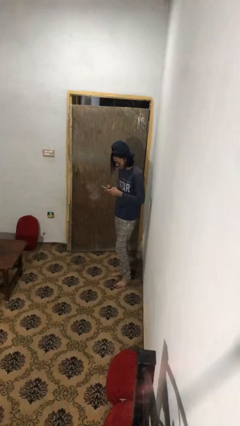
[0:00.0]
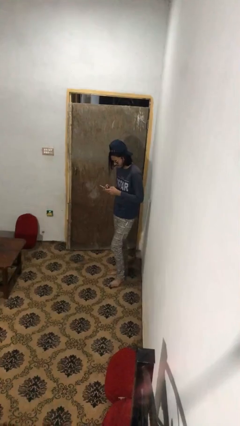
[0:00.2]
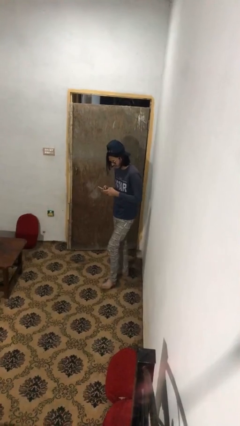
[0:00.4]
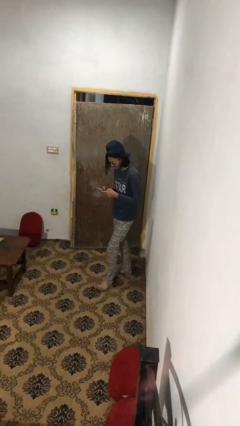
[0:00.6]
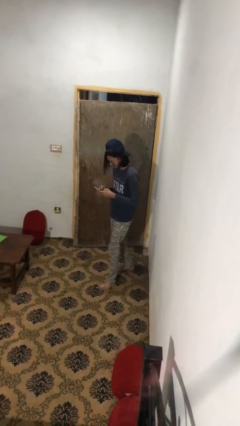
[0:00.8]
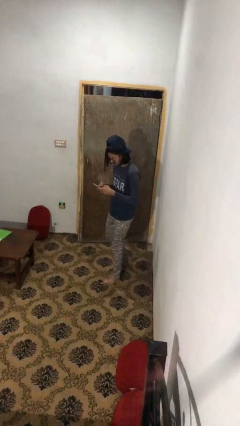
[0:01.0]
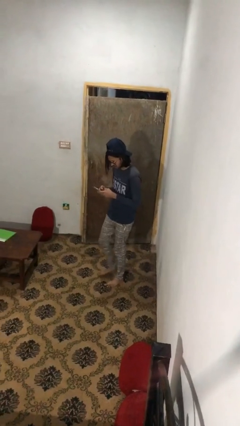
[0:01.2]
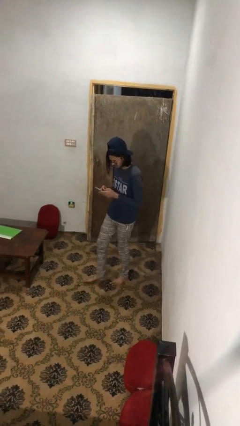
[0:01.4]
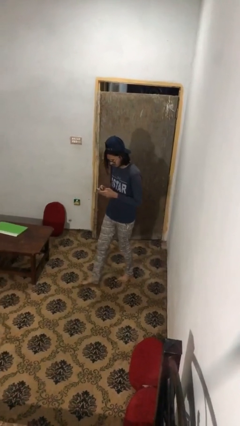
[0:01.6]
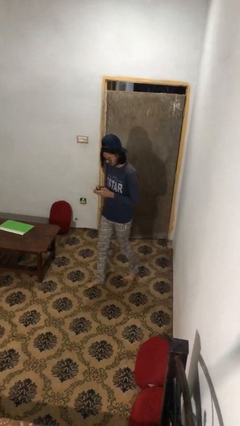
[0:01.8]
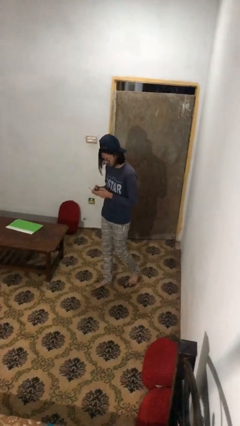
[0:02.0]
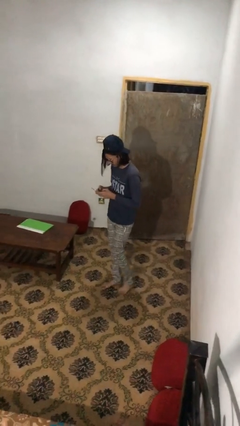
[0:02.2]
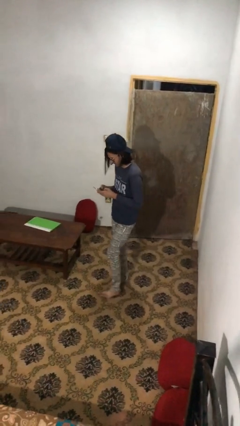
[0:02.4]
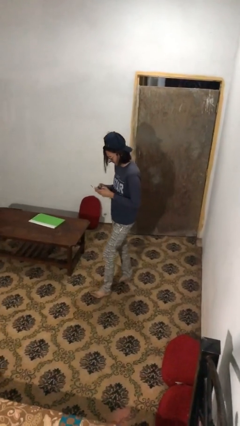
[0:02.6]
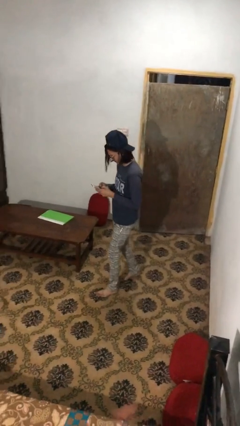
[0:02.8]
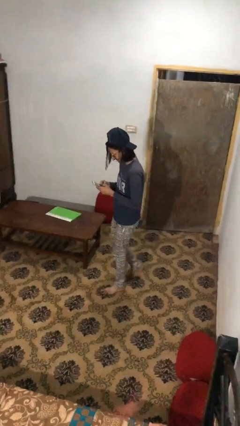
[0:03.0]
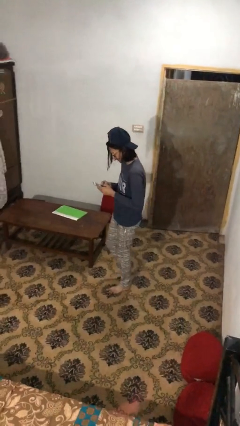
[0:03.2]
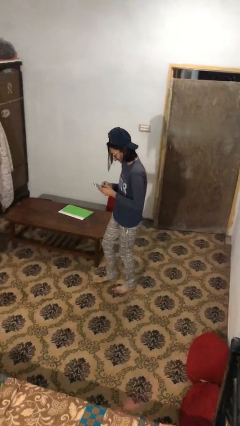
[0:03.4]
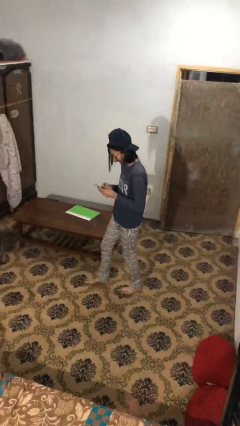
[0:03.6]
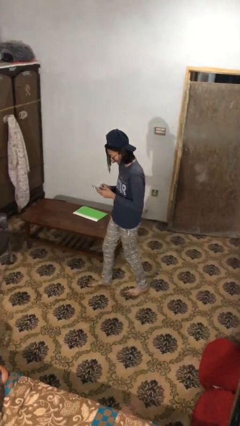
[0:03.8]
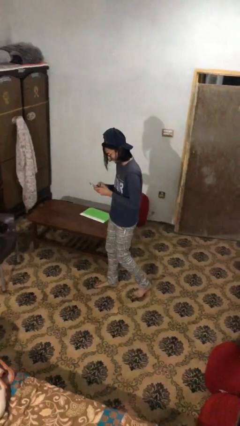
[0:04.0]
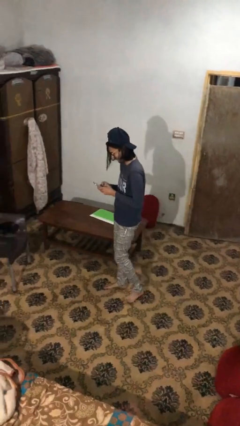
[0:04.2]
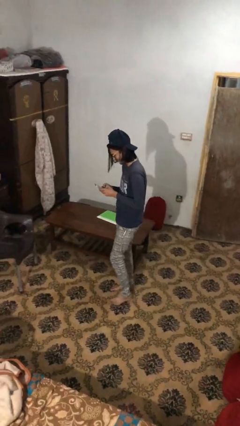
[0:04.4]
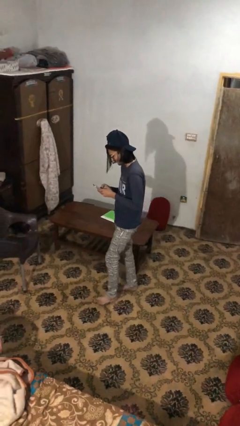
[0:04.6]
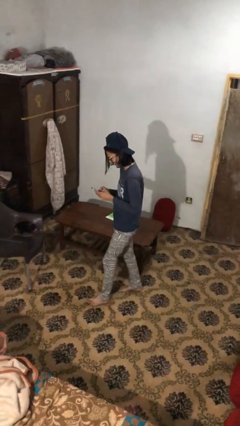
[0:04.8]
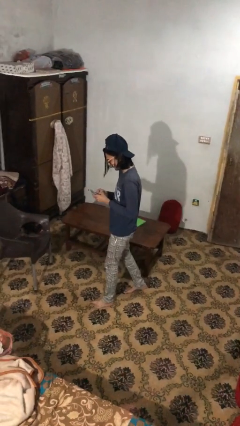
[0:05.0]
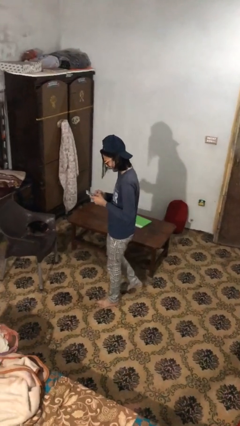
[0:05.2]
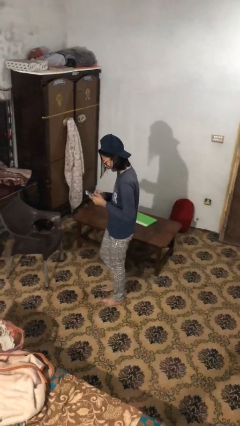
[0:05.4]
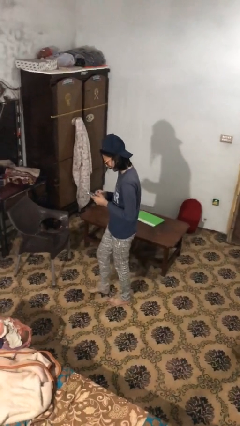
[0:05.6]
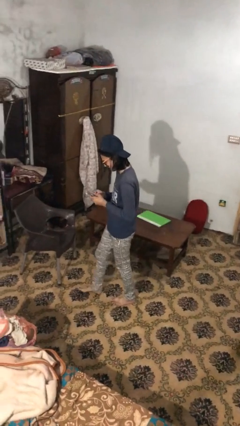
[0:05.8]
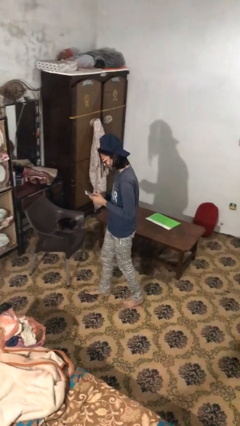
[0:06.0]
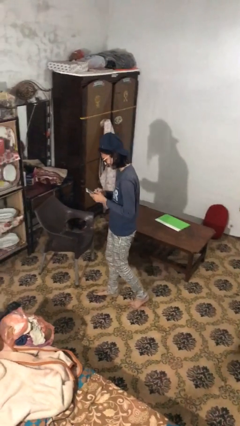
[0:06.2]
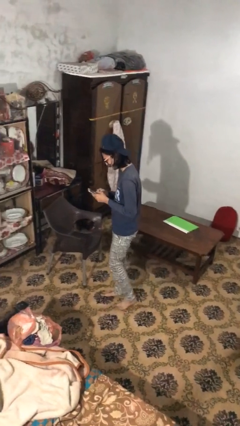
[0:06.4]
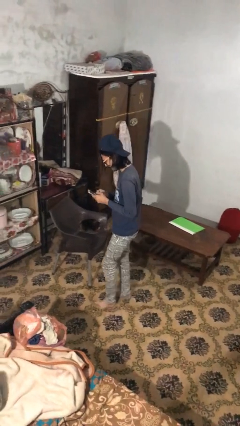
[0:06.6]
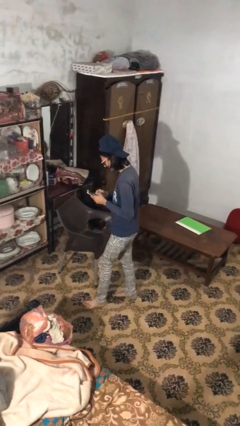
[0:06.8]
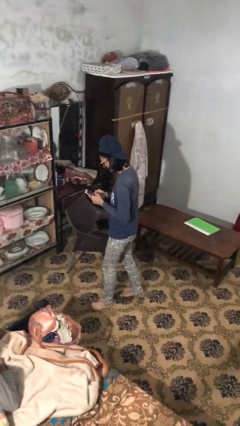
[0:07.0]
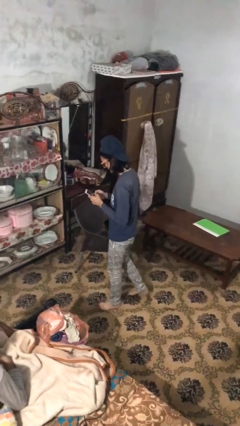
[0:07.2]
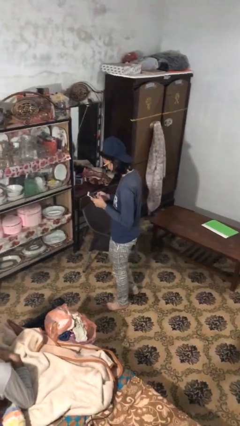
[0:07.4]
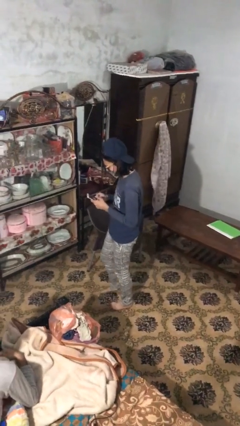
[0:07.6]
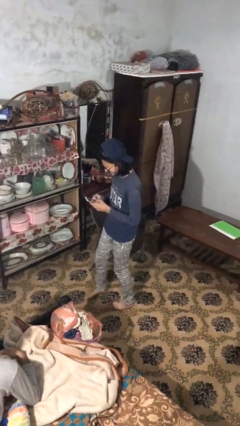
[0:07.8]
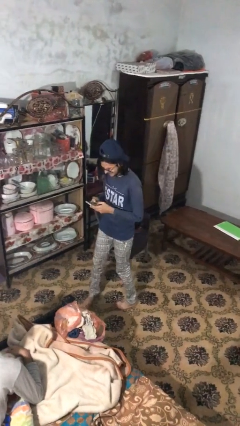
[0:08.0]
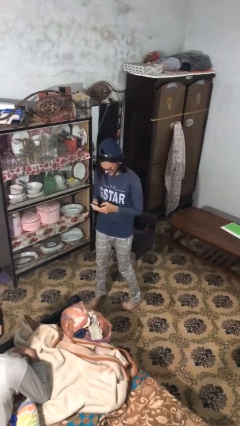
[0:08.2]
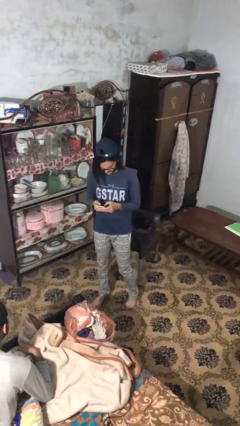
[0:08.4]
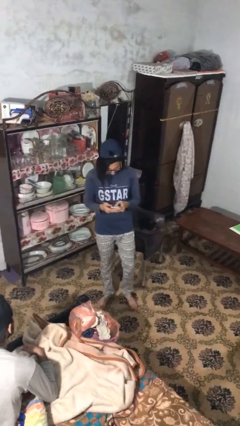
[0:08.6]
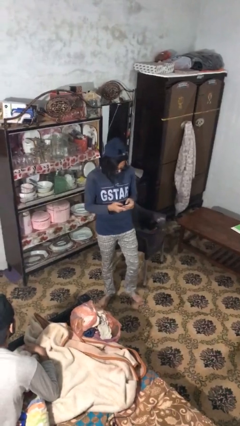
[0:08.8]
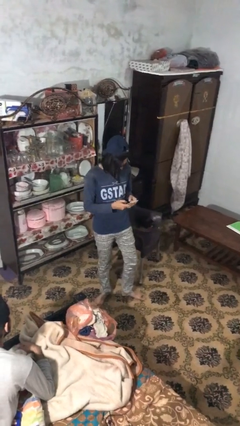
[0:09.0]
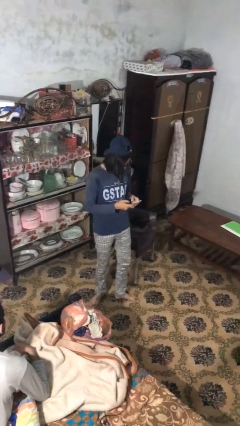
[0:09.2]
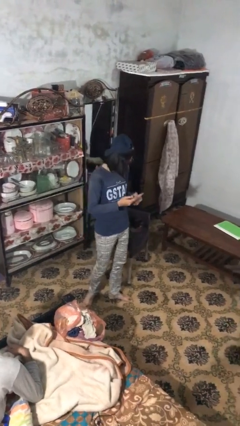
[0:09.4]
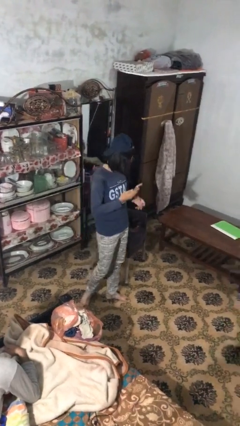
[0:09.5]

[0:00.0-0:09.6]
person texts on phone

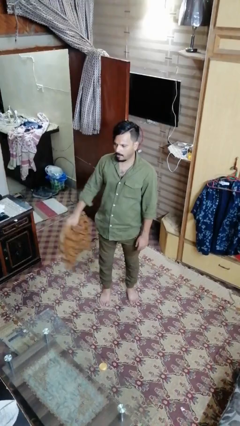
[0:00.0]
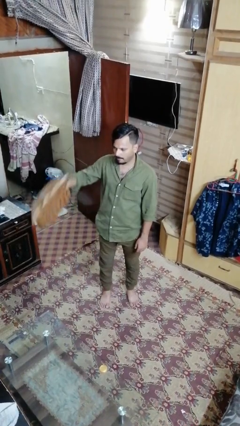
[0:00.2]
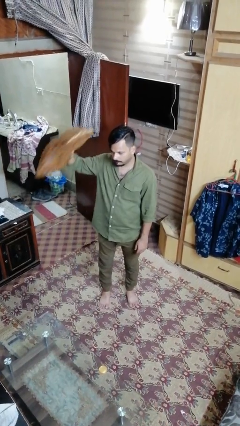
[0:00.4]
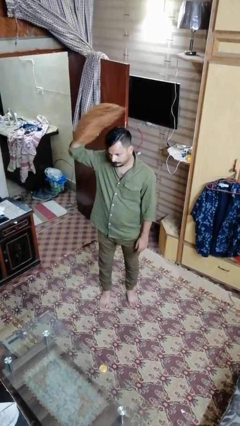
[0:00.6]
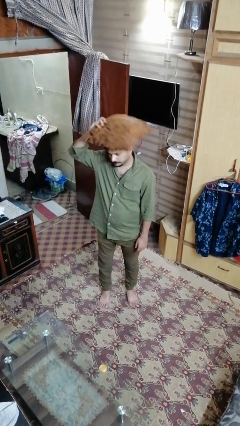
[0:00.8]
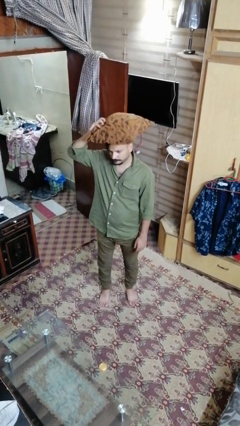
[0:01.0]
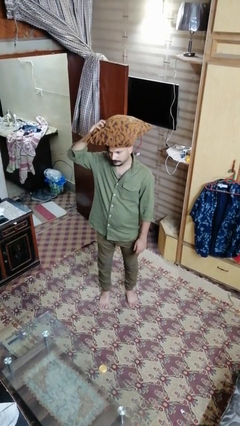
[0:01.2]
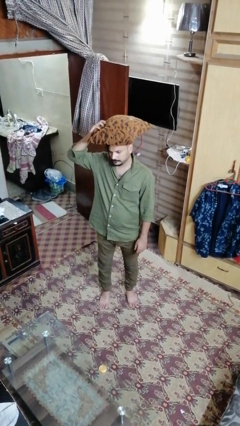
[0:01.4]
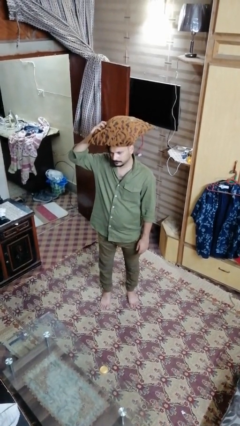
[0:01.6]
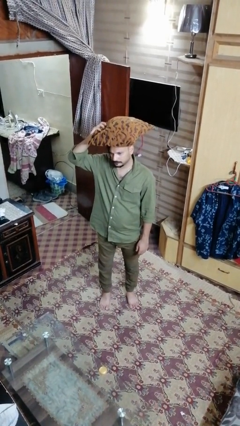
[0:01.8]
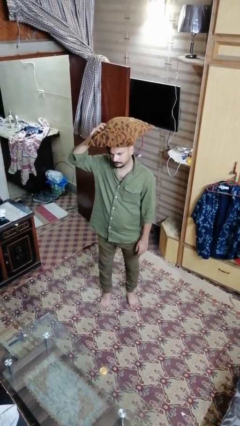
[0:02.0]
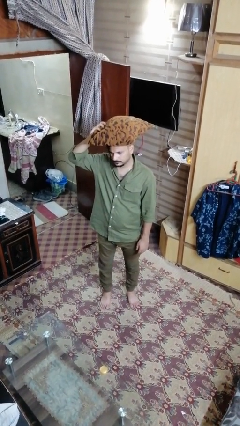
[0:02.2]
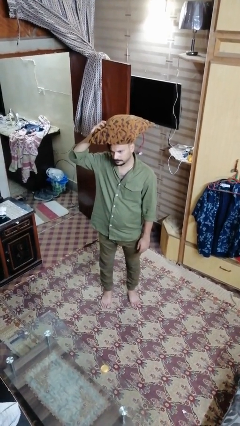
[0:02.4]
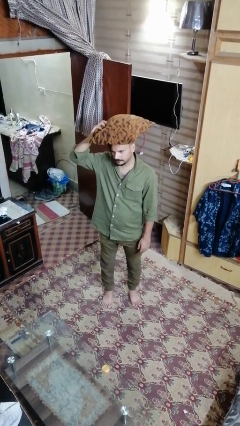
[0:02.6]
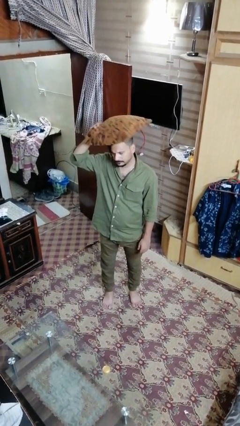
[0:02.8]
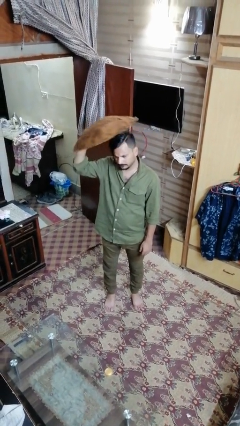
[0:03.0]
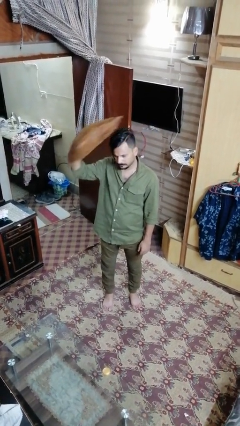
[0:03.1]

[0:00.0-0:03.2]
person holds object above head

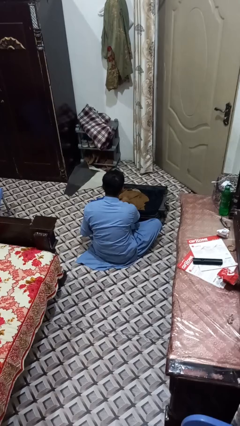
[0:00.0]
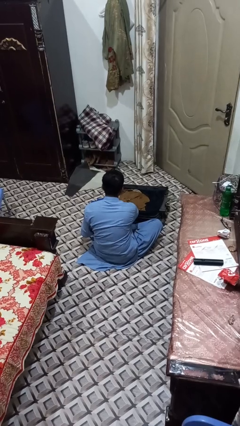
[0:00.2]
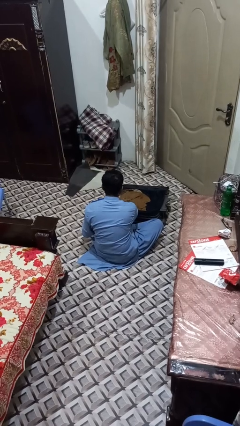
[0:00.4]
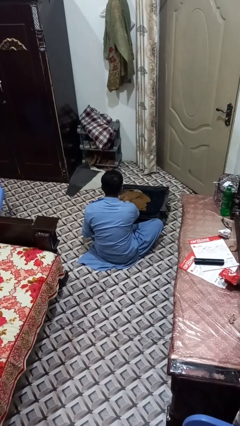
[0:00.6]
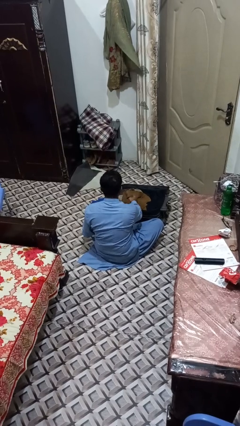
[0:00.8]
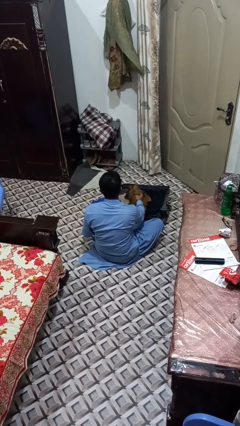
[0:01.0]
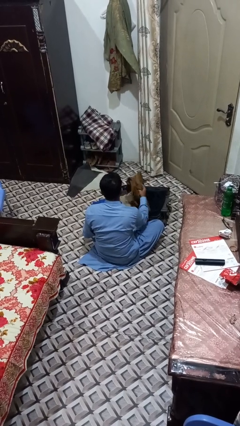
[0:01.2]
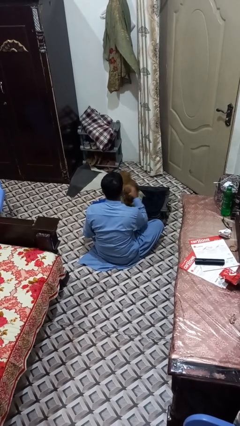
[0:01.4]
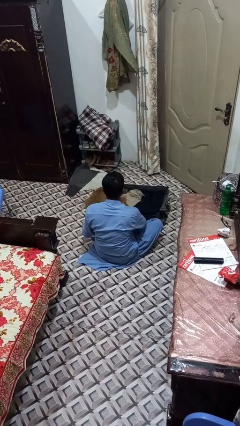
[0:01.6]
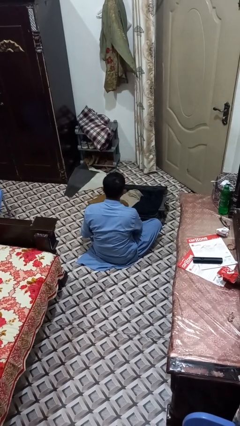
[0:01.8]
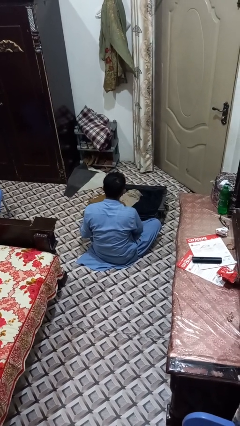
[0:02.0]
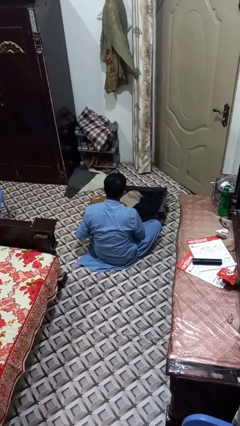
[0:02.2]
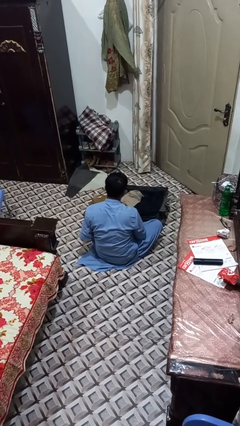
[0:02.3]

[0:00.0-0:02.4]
person unloads clothes from suitcase

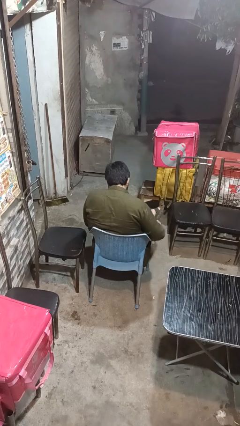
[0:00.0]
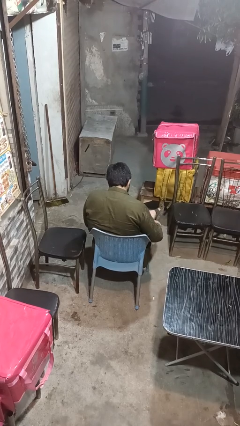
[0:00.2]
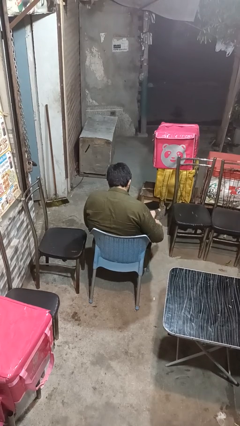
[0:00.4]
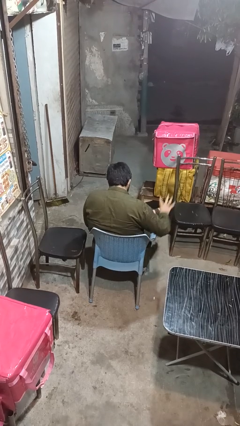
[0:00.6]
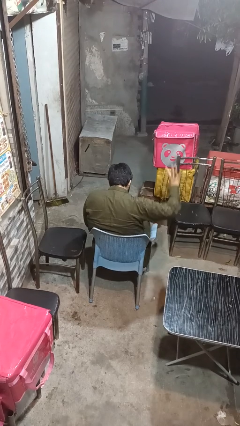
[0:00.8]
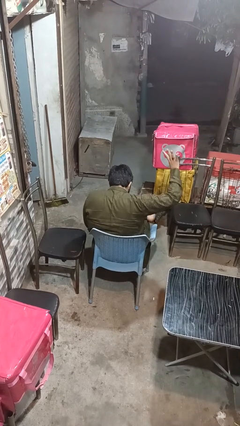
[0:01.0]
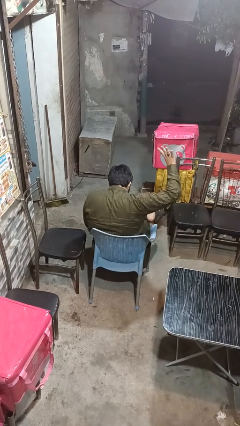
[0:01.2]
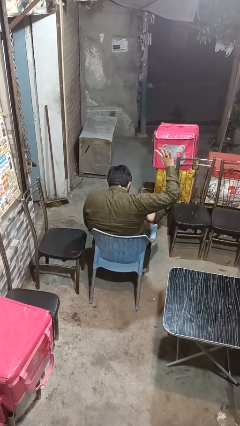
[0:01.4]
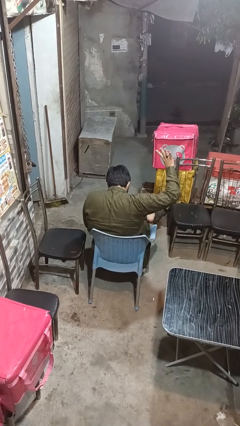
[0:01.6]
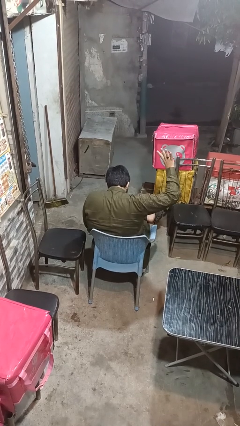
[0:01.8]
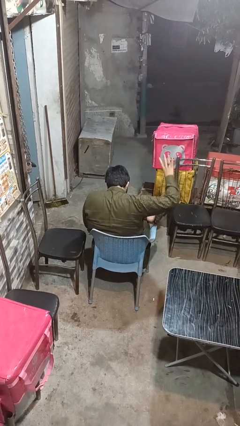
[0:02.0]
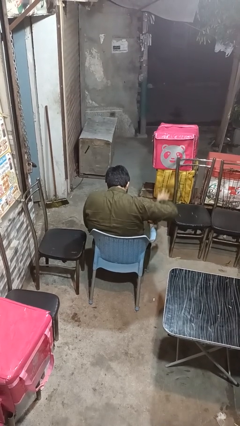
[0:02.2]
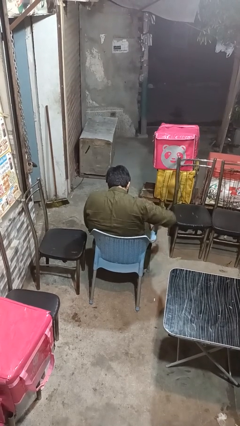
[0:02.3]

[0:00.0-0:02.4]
person gestures number four

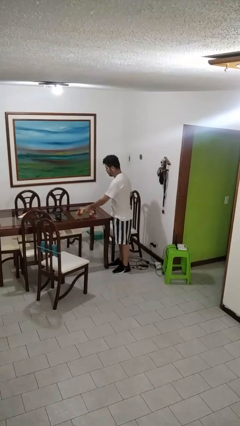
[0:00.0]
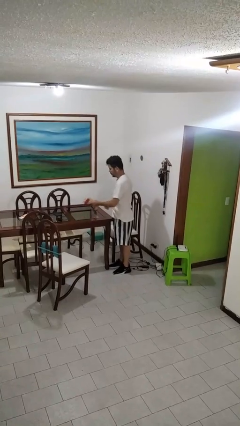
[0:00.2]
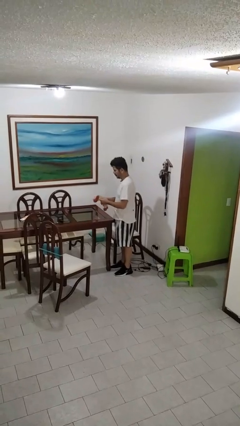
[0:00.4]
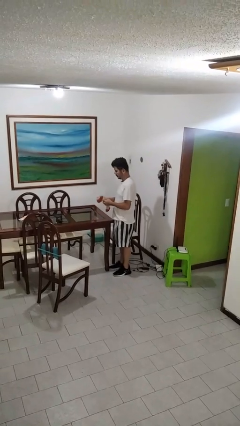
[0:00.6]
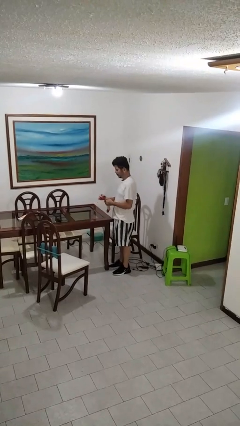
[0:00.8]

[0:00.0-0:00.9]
person picks up object from table
